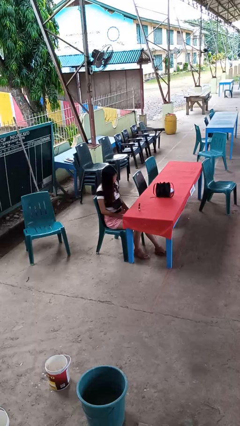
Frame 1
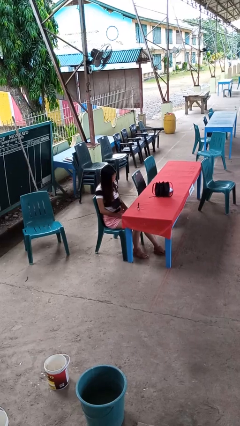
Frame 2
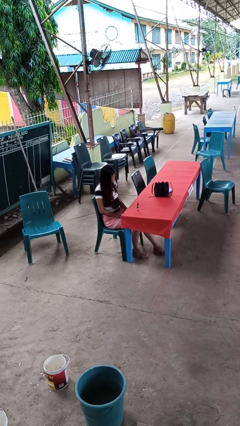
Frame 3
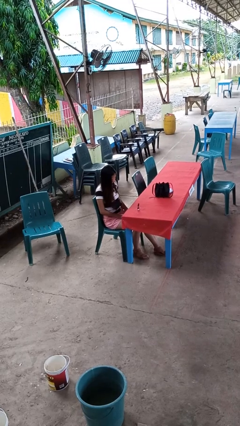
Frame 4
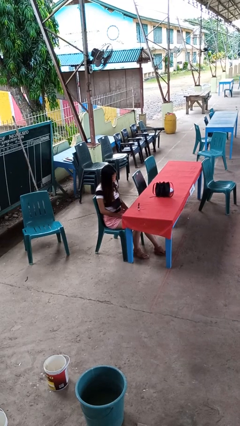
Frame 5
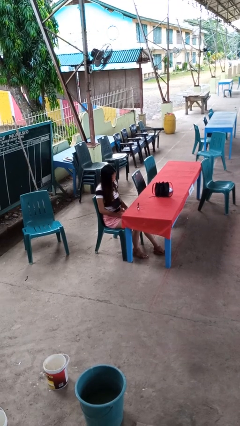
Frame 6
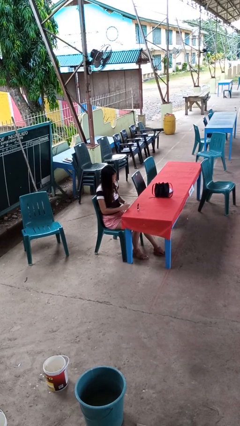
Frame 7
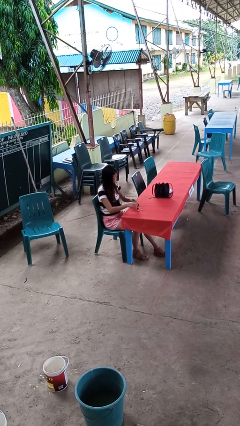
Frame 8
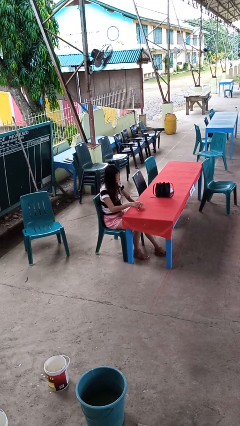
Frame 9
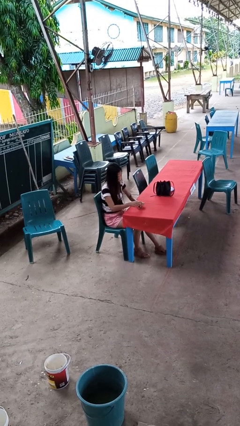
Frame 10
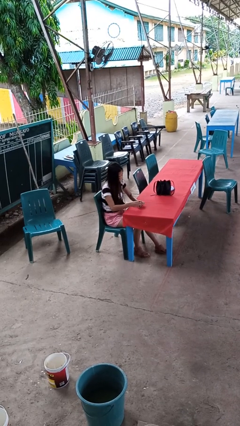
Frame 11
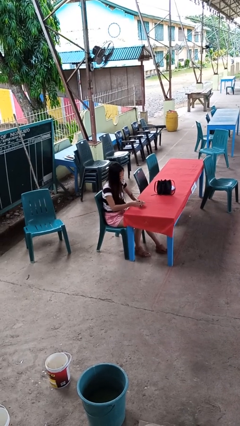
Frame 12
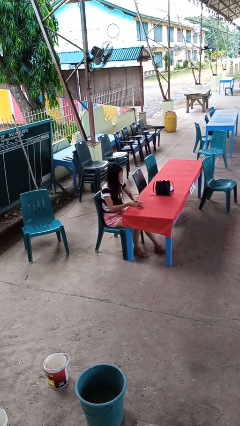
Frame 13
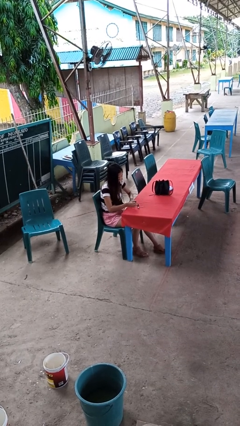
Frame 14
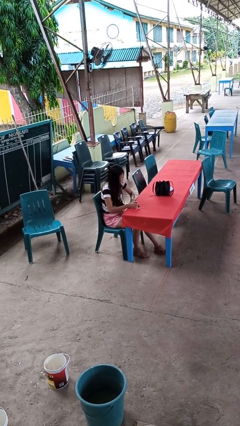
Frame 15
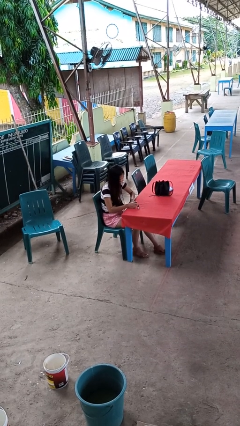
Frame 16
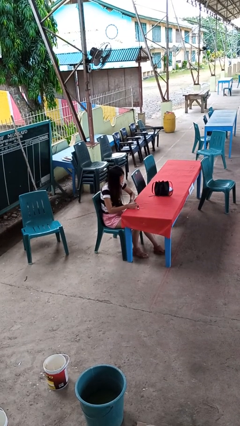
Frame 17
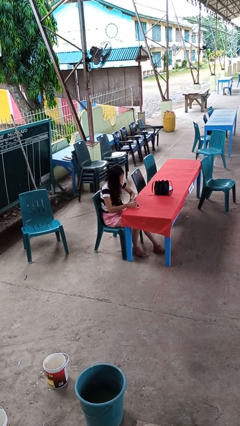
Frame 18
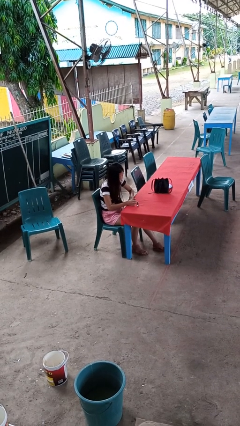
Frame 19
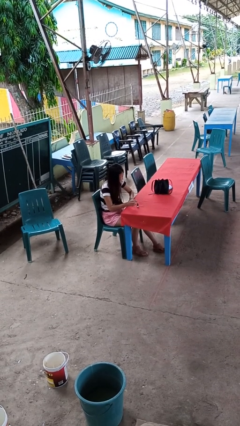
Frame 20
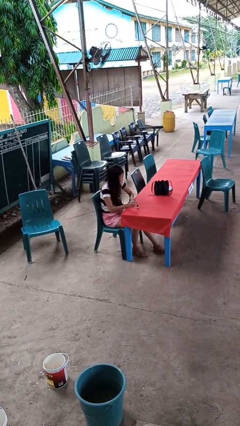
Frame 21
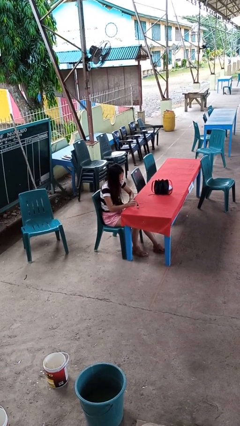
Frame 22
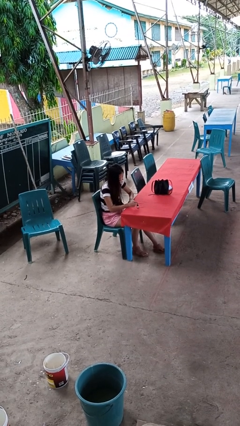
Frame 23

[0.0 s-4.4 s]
person paints fingernails

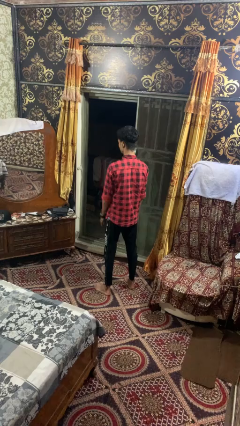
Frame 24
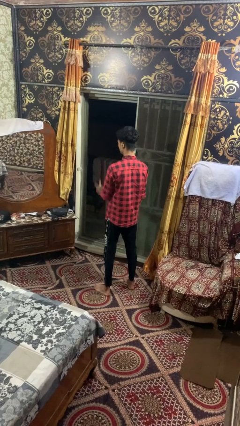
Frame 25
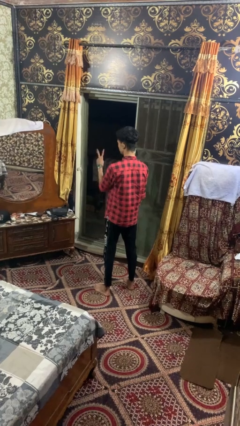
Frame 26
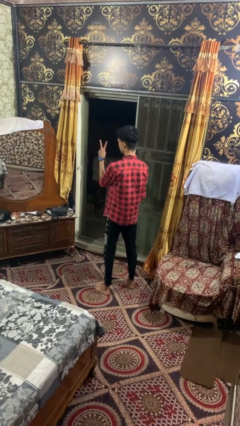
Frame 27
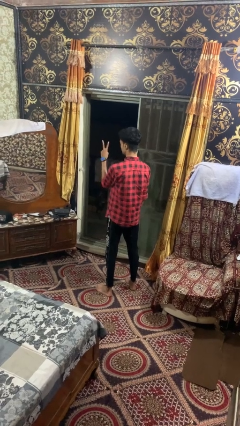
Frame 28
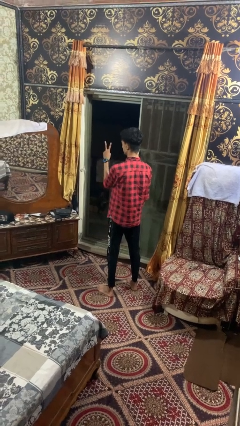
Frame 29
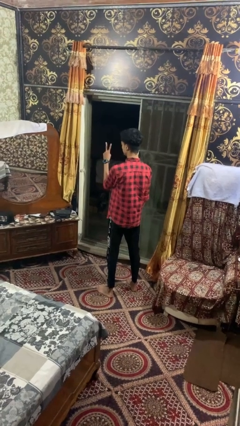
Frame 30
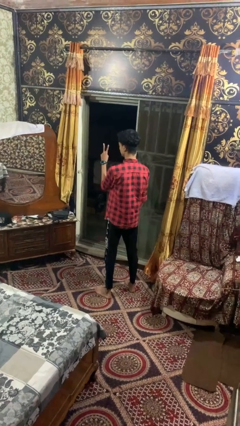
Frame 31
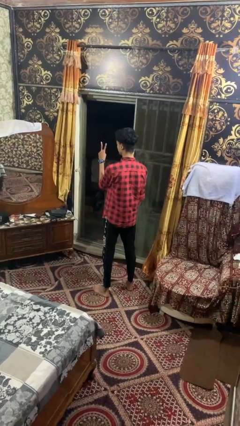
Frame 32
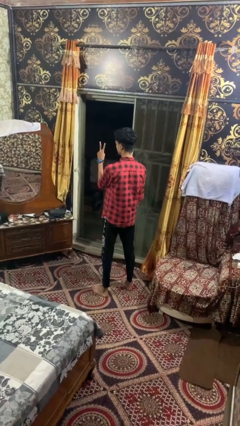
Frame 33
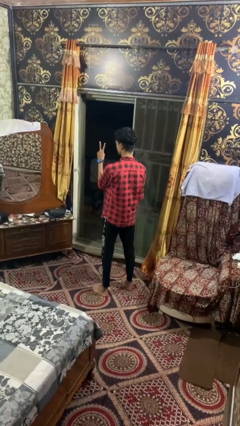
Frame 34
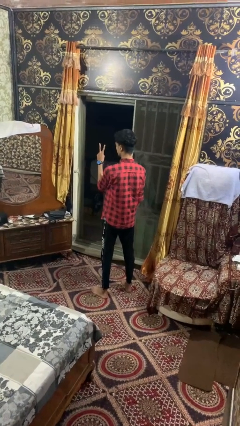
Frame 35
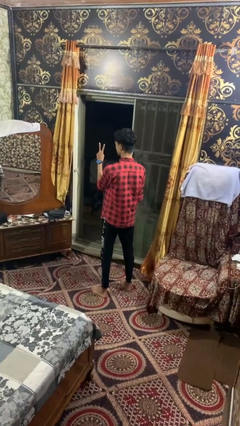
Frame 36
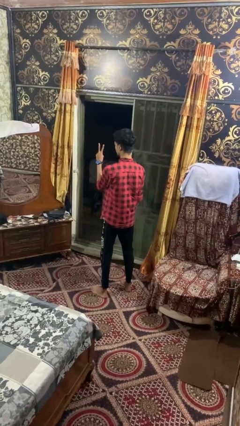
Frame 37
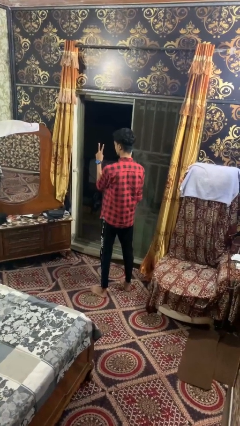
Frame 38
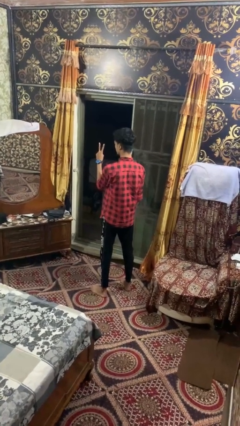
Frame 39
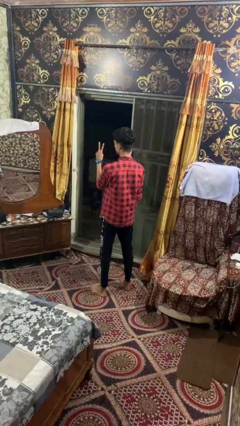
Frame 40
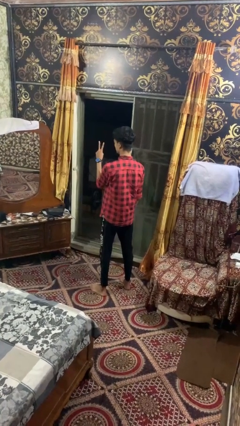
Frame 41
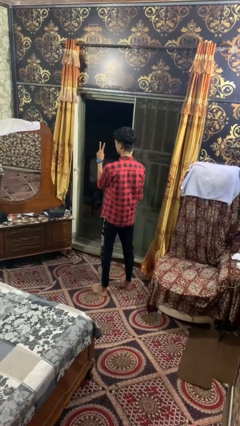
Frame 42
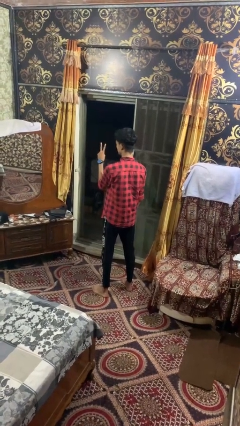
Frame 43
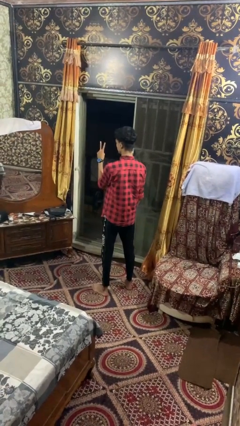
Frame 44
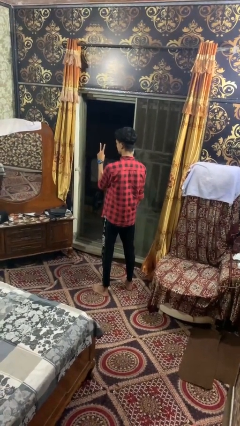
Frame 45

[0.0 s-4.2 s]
person gestures peace

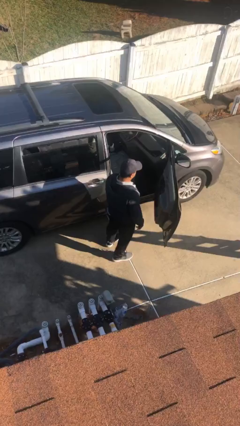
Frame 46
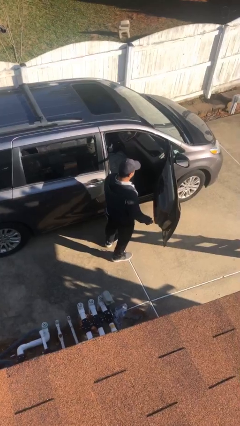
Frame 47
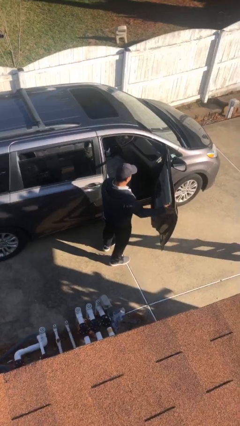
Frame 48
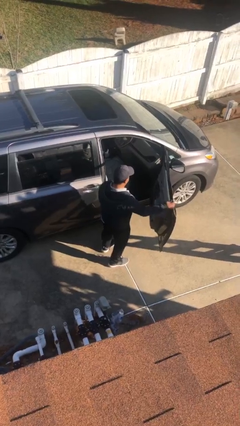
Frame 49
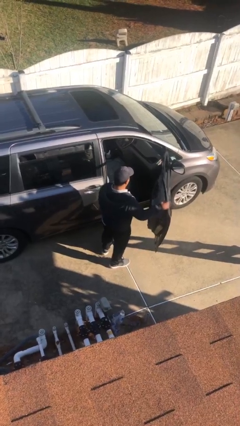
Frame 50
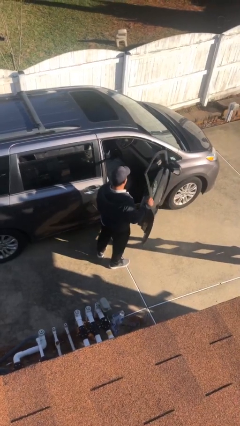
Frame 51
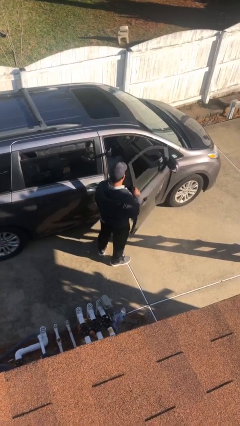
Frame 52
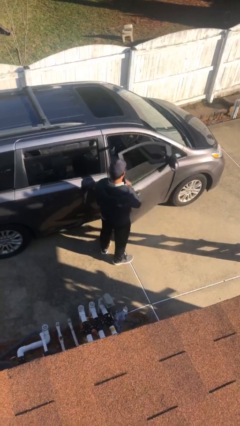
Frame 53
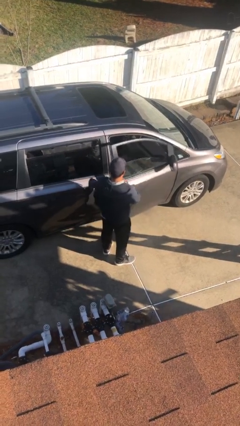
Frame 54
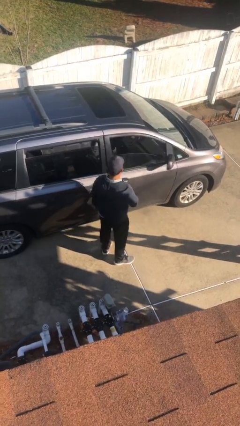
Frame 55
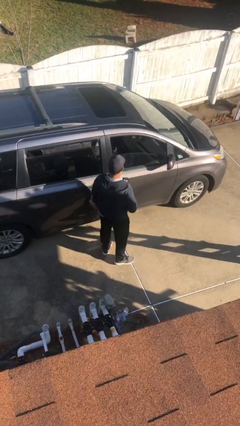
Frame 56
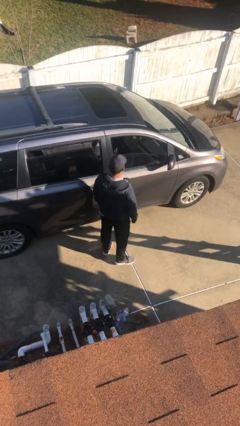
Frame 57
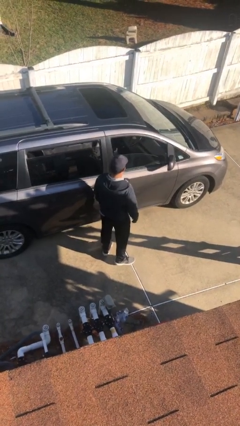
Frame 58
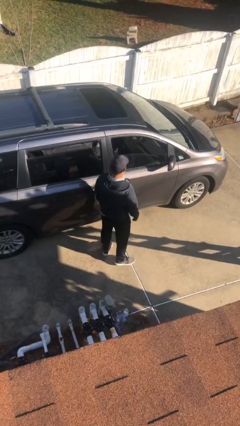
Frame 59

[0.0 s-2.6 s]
person closes car door

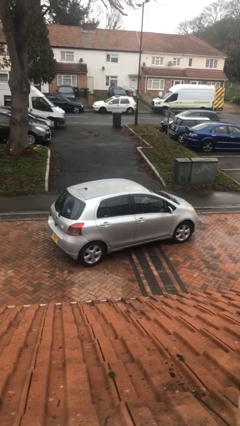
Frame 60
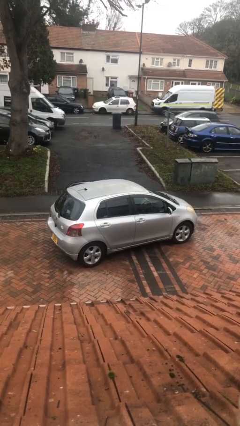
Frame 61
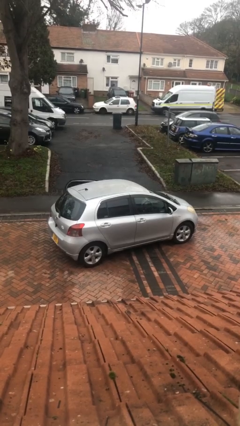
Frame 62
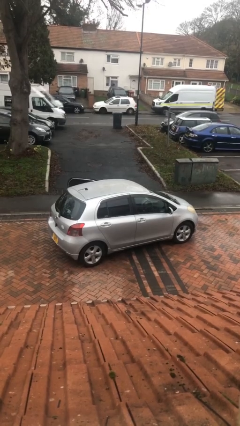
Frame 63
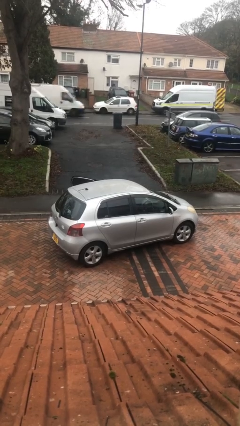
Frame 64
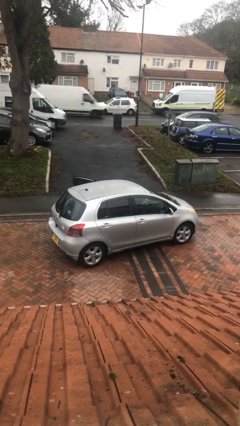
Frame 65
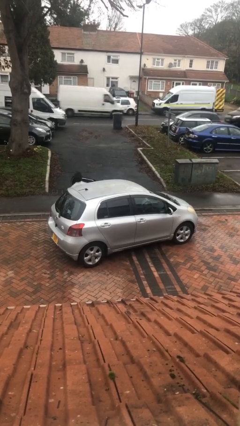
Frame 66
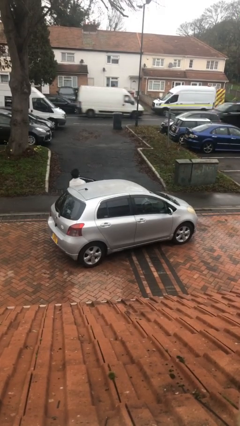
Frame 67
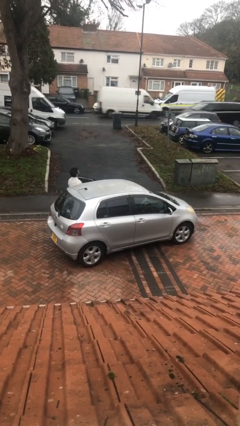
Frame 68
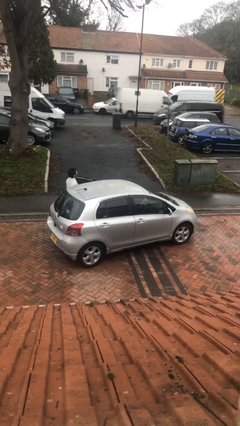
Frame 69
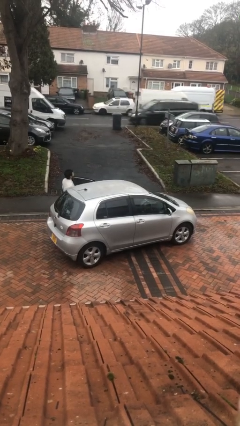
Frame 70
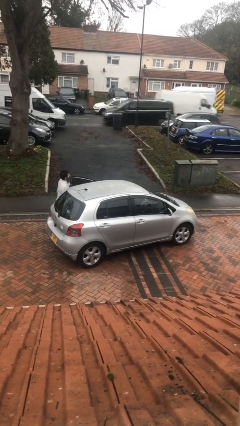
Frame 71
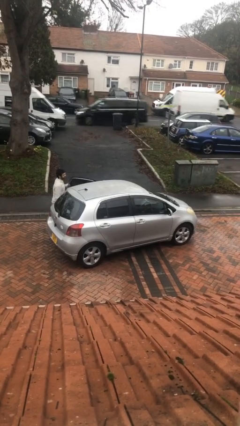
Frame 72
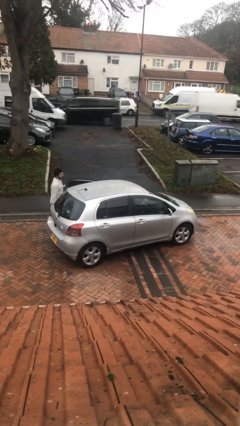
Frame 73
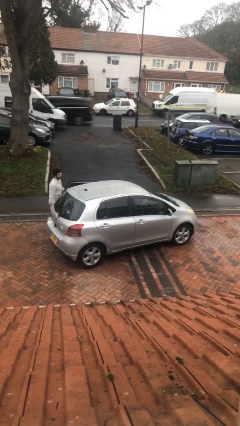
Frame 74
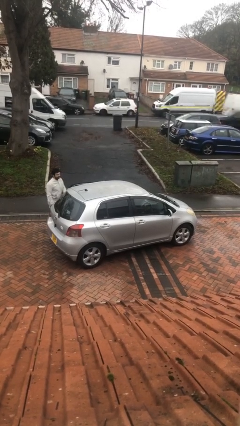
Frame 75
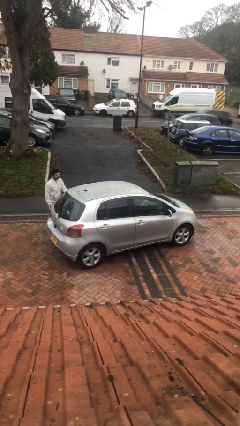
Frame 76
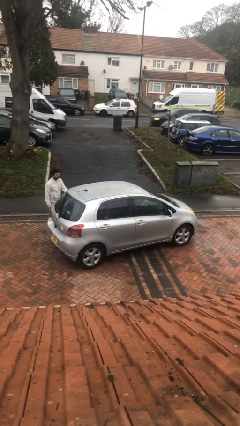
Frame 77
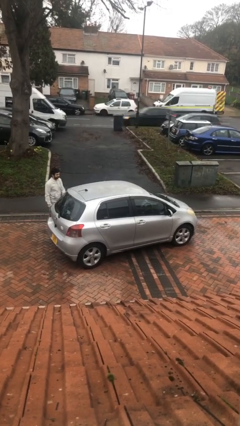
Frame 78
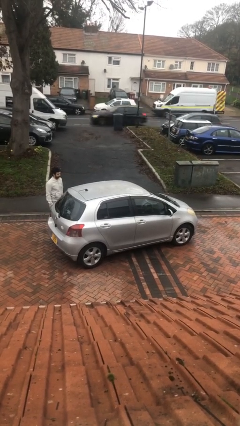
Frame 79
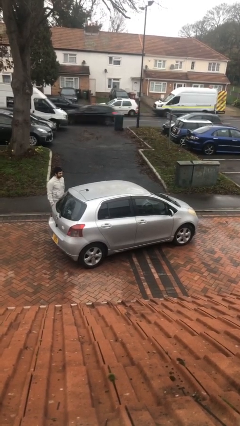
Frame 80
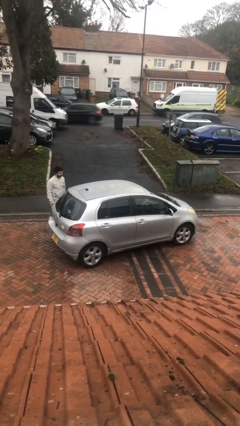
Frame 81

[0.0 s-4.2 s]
car drops off person

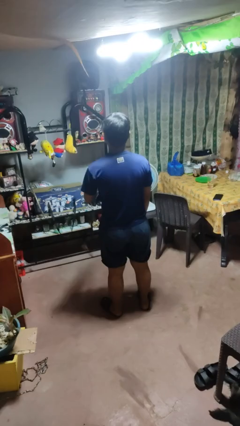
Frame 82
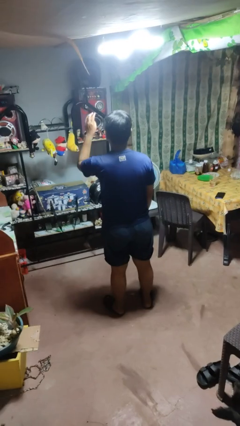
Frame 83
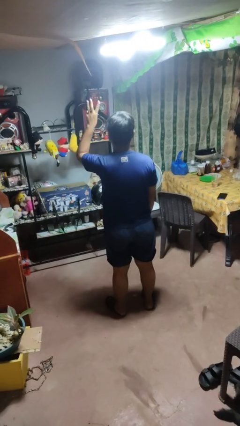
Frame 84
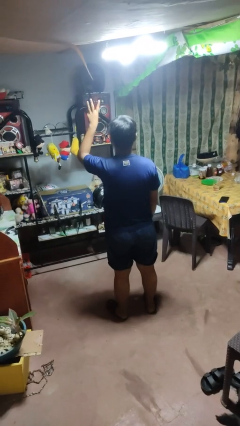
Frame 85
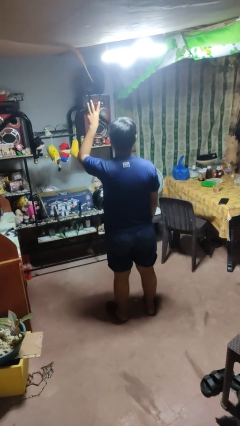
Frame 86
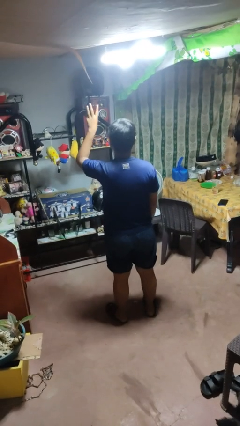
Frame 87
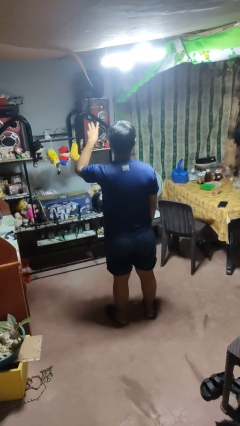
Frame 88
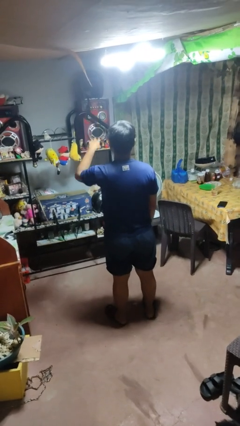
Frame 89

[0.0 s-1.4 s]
person gestures number three

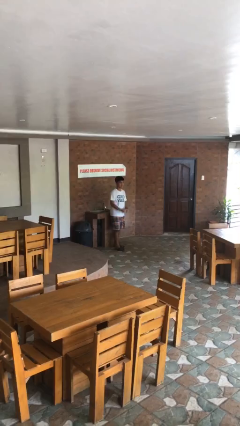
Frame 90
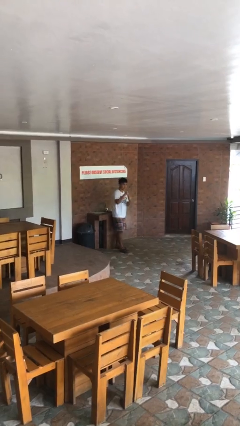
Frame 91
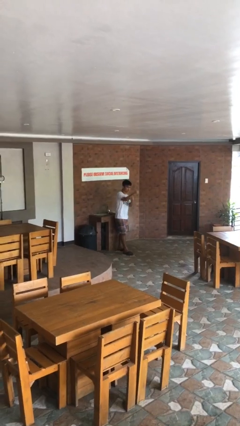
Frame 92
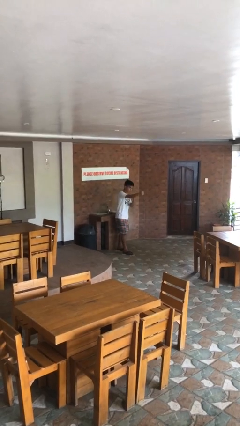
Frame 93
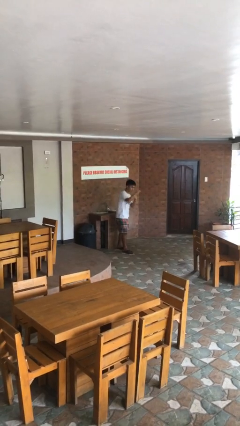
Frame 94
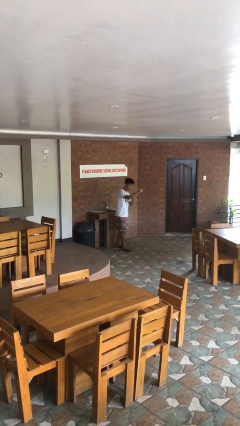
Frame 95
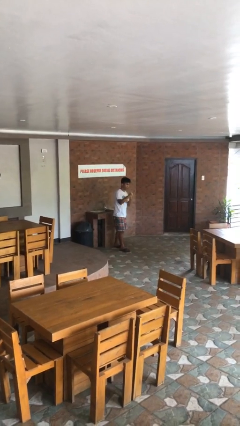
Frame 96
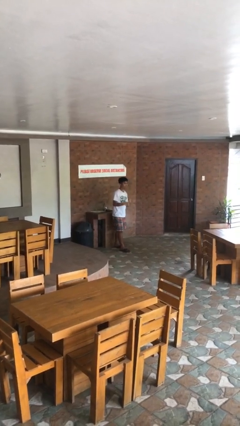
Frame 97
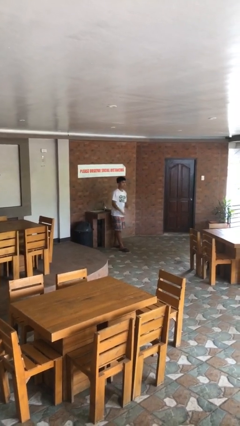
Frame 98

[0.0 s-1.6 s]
person punches
